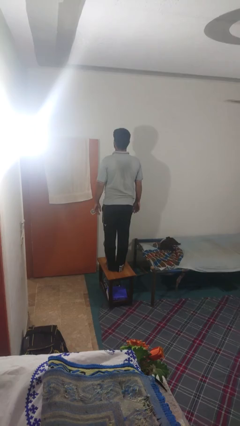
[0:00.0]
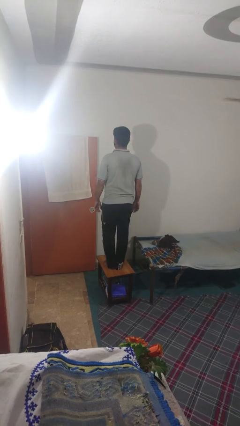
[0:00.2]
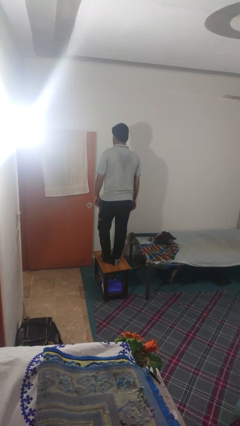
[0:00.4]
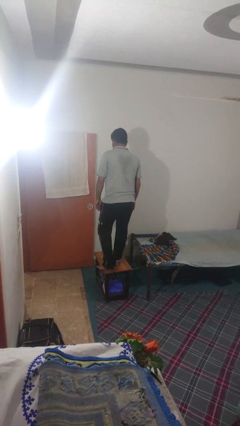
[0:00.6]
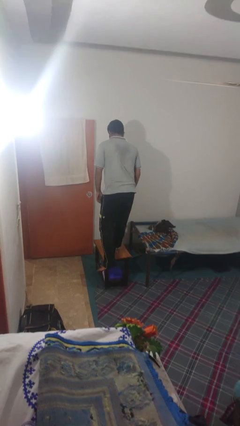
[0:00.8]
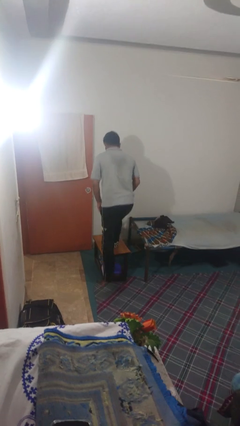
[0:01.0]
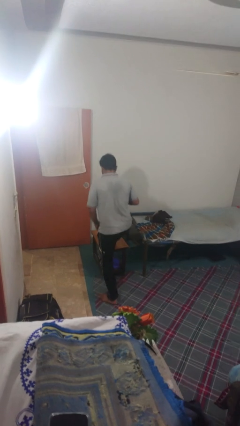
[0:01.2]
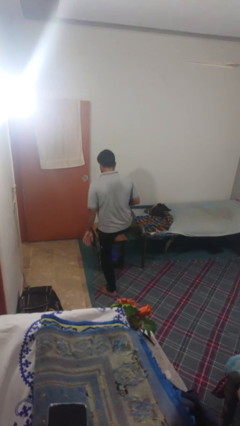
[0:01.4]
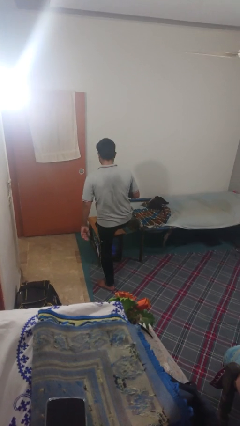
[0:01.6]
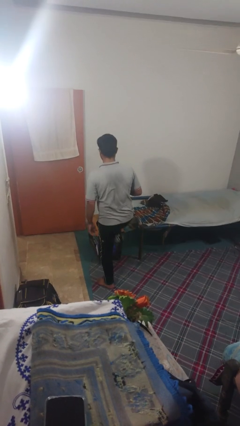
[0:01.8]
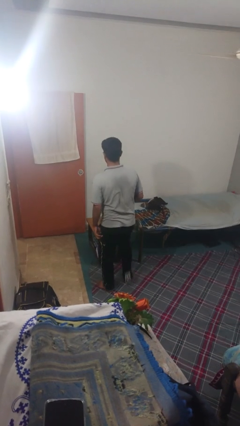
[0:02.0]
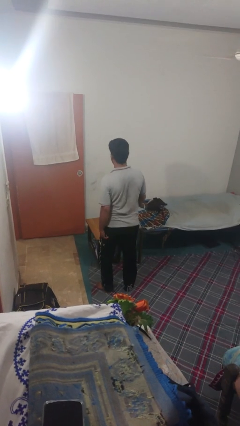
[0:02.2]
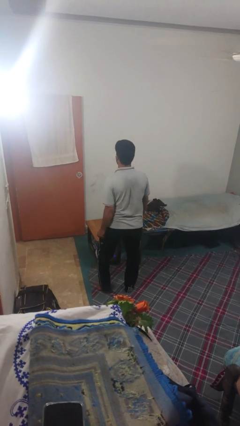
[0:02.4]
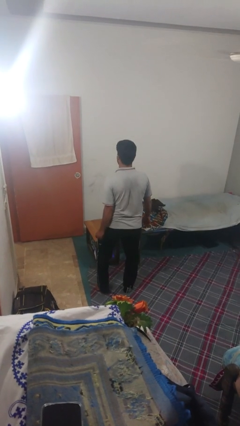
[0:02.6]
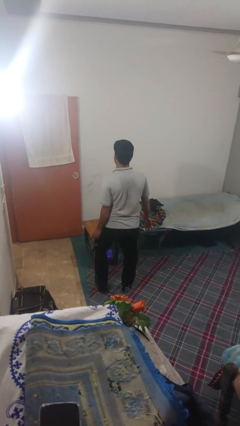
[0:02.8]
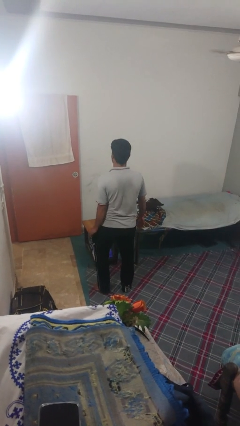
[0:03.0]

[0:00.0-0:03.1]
person climbs off table

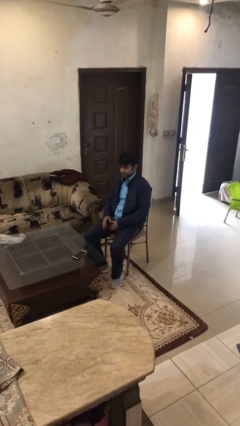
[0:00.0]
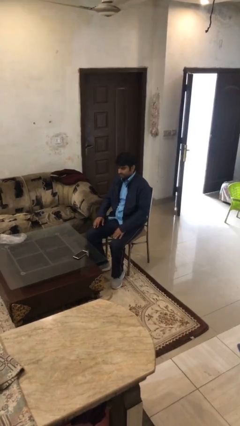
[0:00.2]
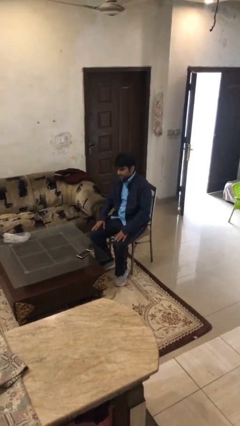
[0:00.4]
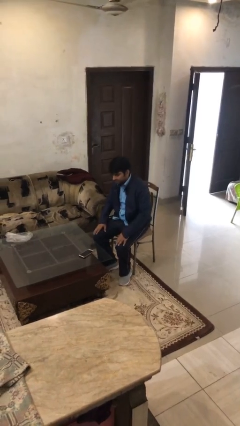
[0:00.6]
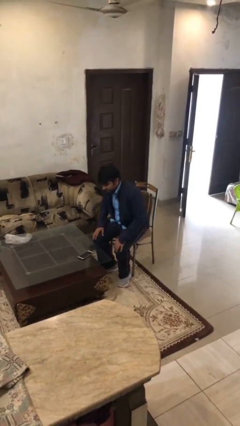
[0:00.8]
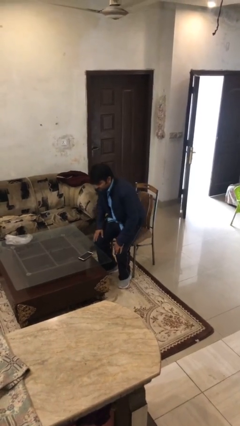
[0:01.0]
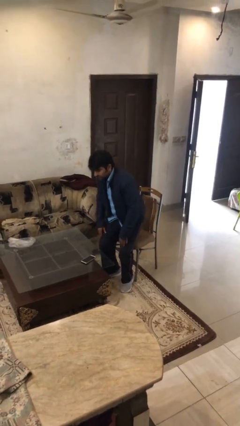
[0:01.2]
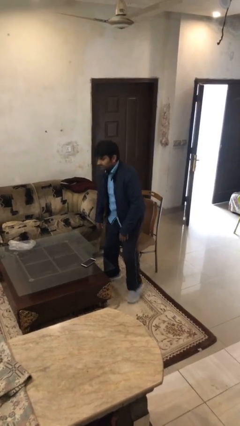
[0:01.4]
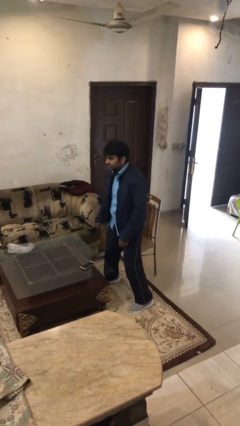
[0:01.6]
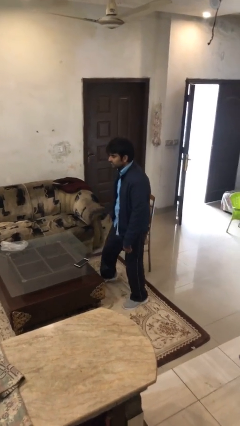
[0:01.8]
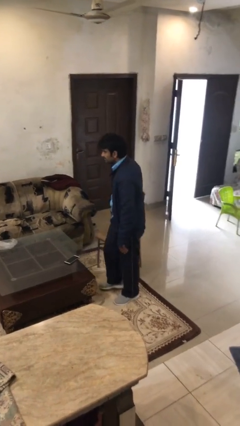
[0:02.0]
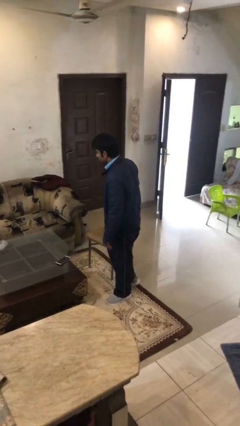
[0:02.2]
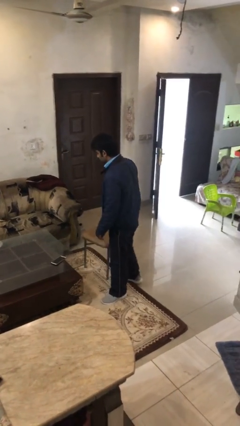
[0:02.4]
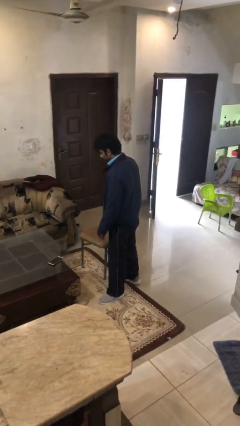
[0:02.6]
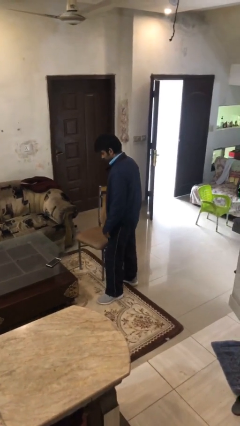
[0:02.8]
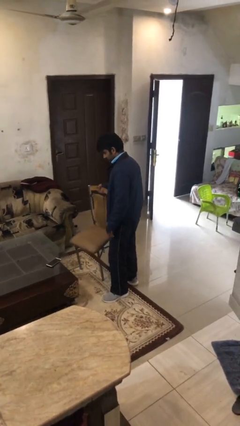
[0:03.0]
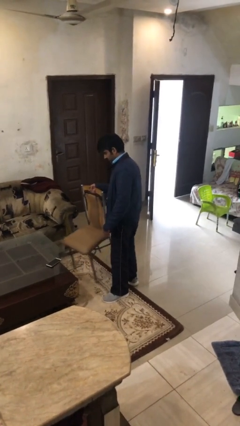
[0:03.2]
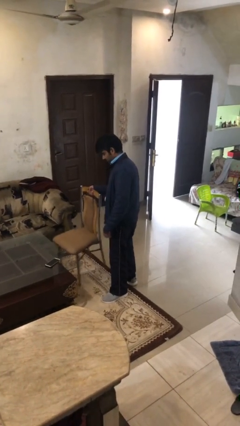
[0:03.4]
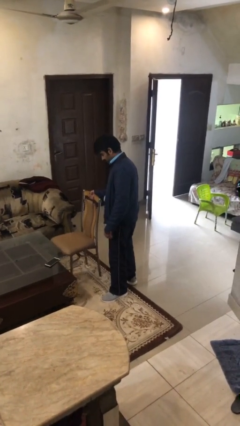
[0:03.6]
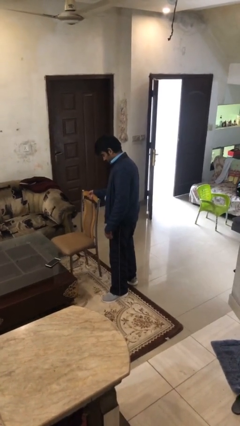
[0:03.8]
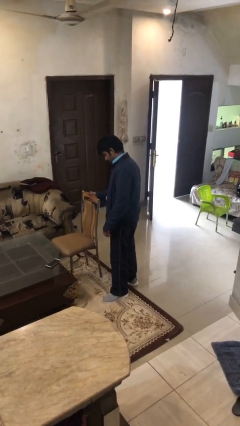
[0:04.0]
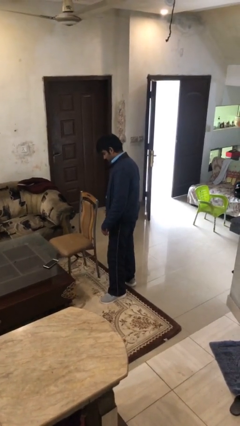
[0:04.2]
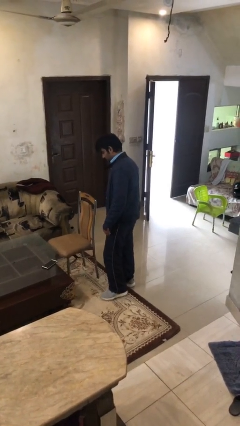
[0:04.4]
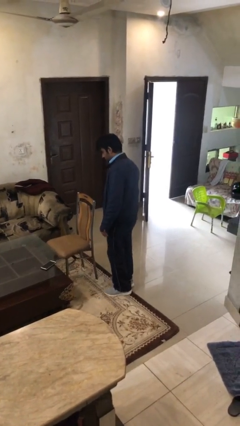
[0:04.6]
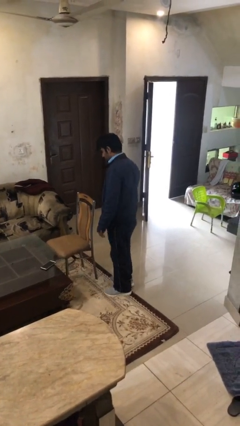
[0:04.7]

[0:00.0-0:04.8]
person stands up

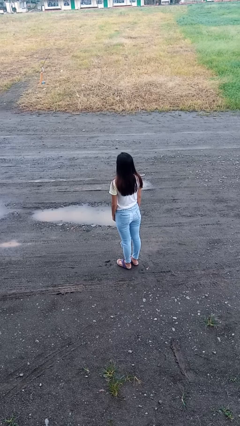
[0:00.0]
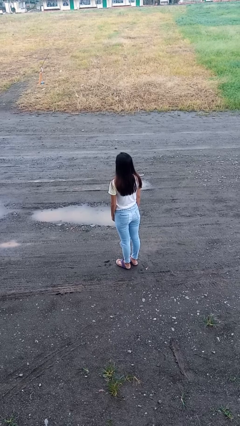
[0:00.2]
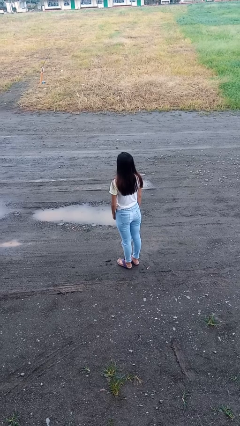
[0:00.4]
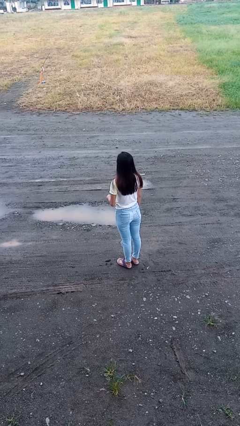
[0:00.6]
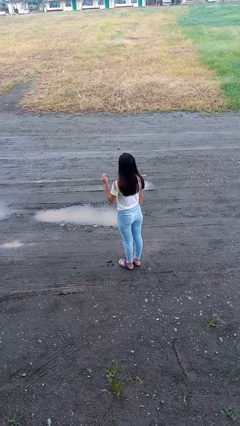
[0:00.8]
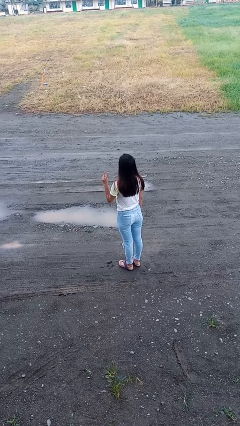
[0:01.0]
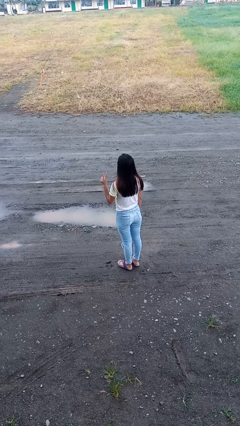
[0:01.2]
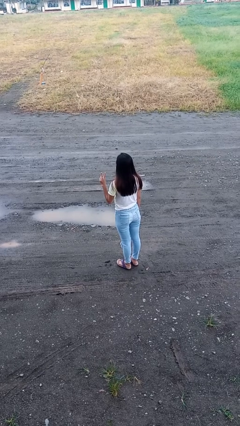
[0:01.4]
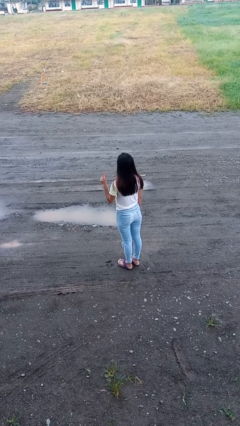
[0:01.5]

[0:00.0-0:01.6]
person gestures peace

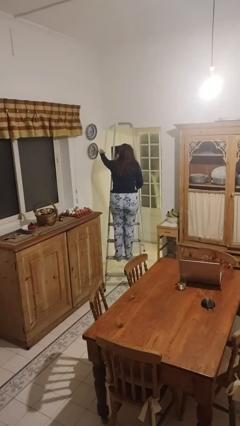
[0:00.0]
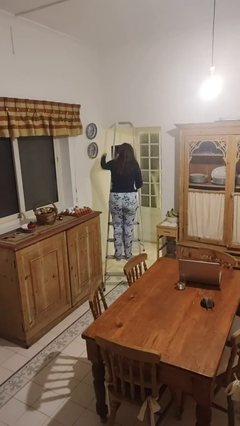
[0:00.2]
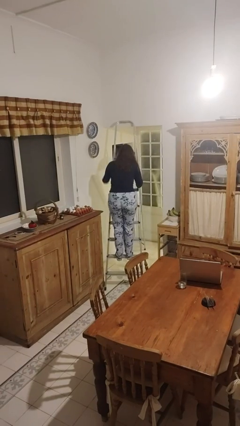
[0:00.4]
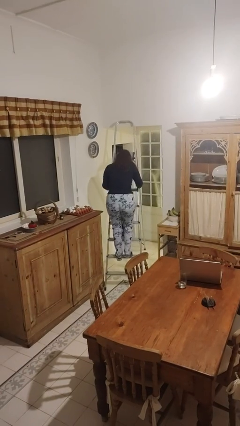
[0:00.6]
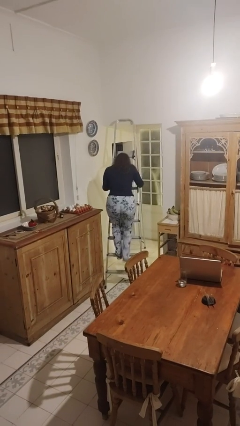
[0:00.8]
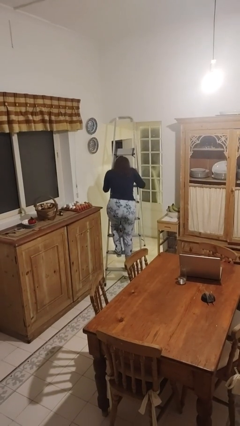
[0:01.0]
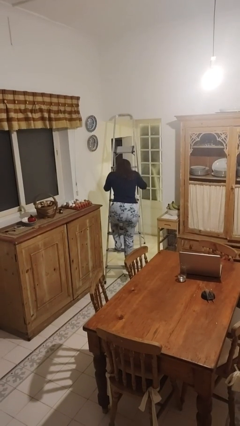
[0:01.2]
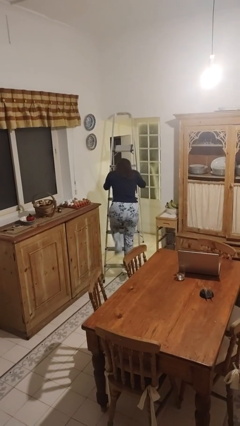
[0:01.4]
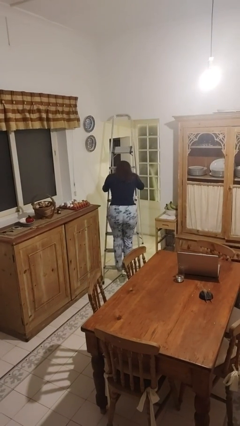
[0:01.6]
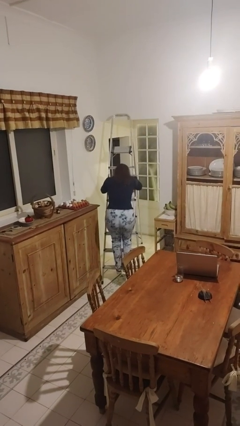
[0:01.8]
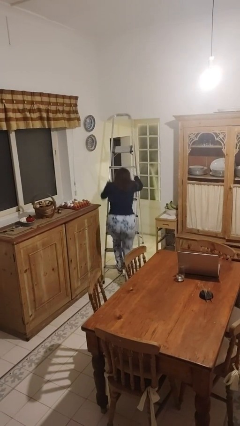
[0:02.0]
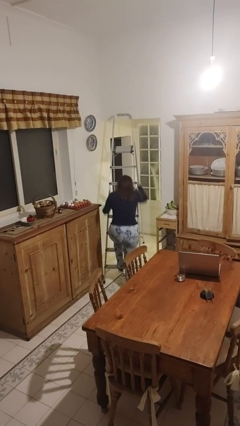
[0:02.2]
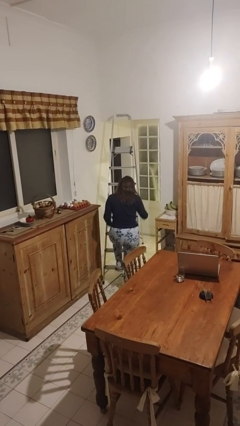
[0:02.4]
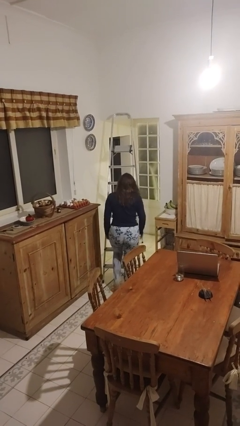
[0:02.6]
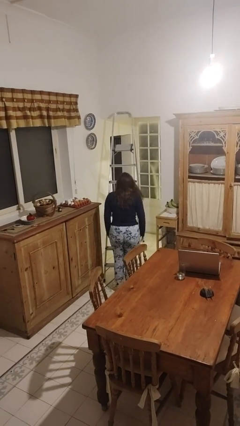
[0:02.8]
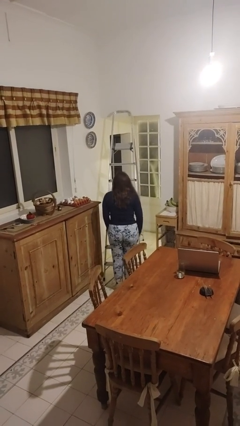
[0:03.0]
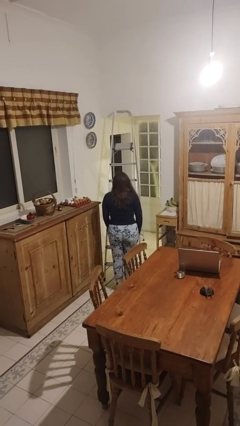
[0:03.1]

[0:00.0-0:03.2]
person climbs down ladder

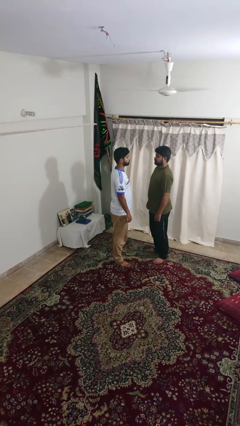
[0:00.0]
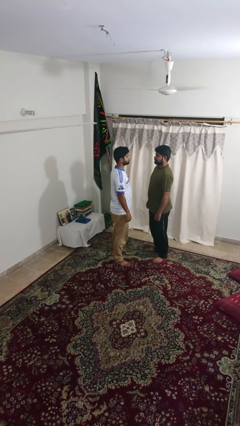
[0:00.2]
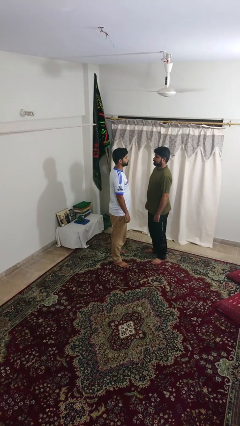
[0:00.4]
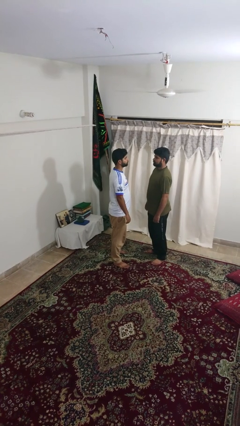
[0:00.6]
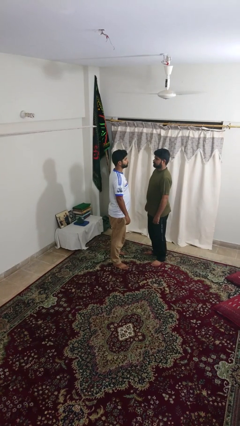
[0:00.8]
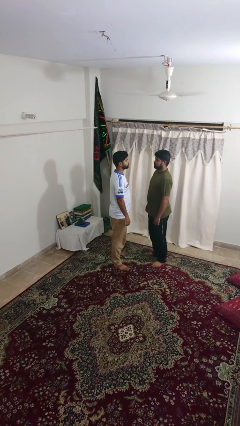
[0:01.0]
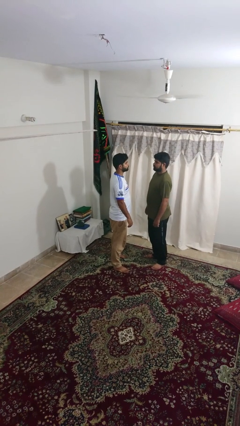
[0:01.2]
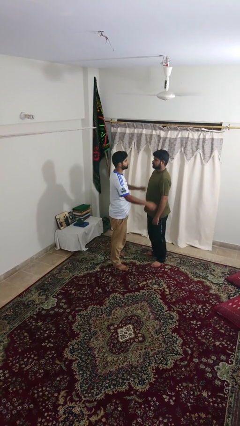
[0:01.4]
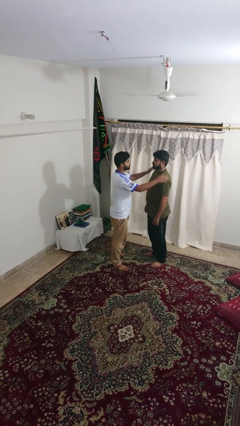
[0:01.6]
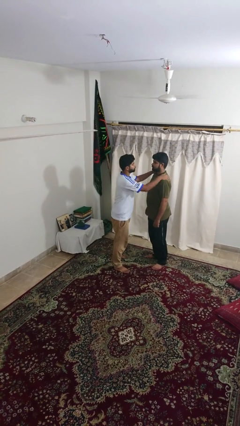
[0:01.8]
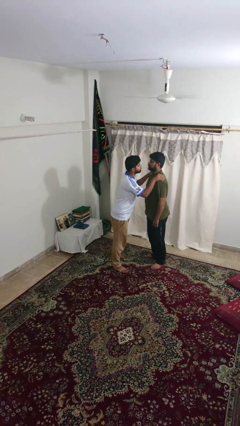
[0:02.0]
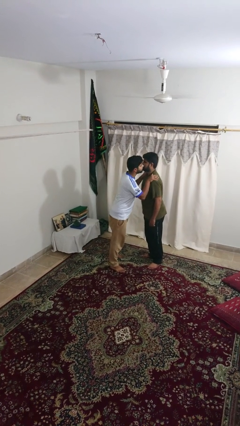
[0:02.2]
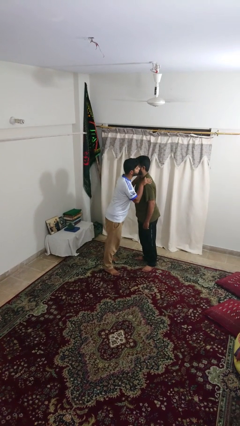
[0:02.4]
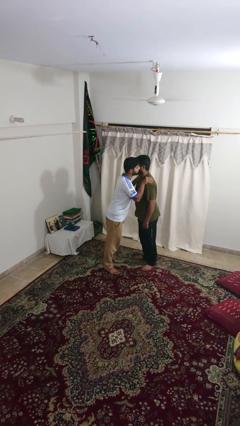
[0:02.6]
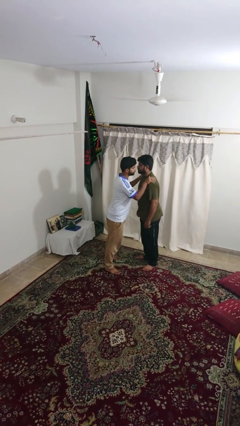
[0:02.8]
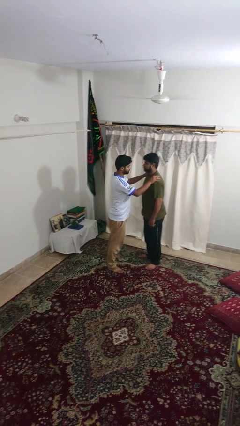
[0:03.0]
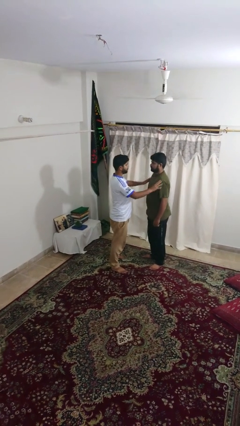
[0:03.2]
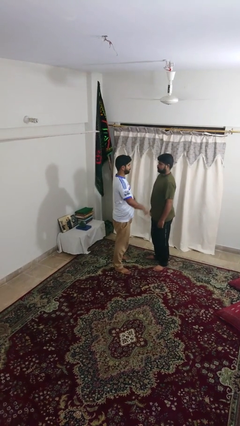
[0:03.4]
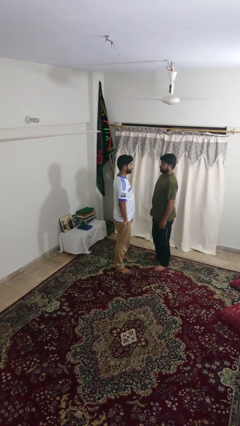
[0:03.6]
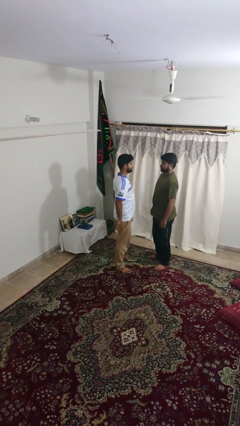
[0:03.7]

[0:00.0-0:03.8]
person kisses cheek of person

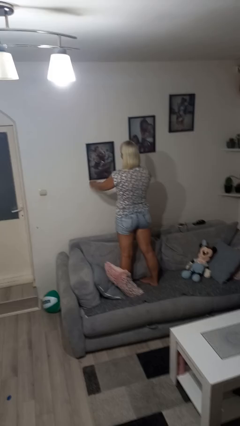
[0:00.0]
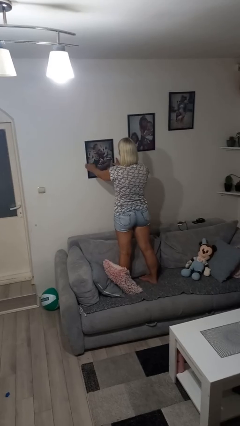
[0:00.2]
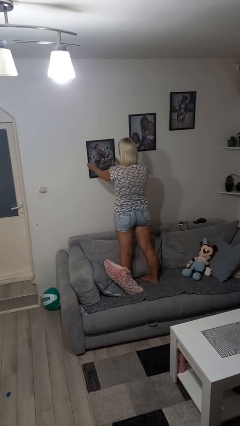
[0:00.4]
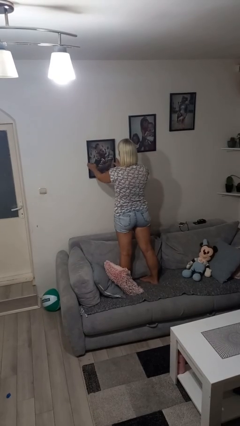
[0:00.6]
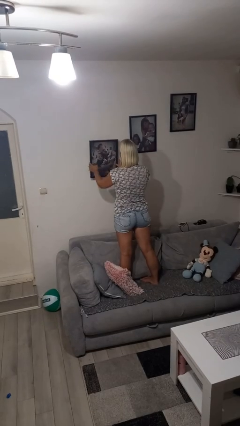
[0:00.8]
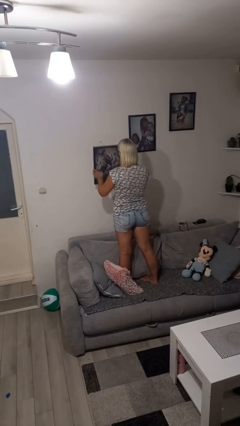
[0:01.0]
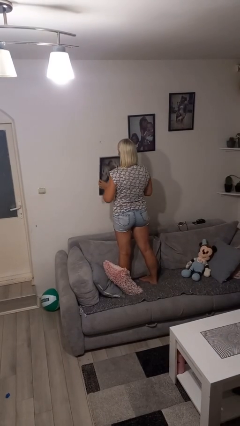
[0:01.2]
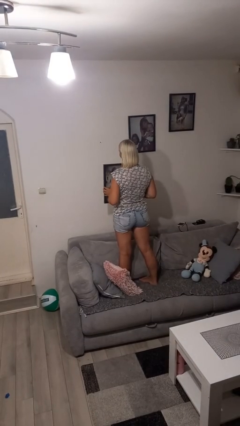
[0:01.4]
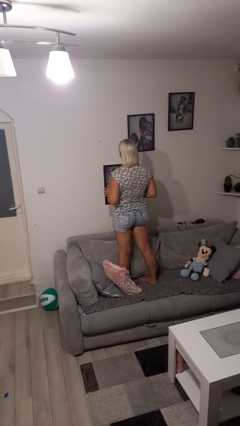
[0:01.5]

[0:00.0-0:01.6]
person takes down picture frame
